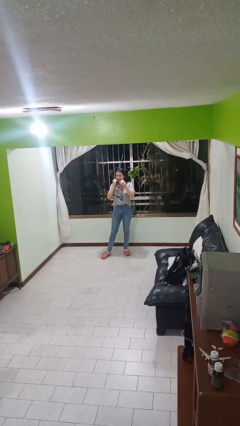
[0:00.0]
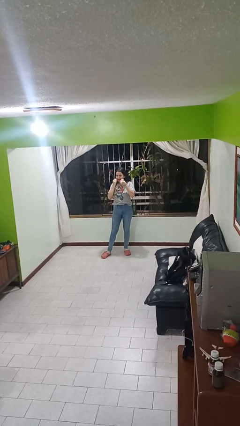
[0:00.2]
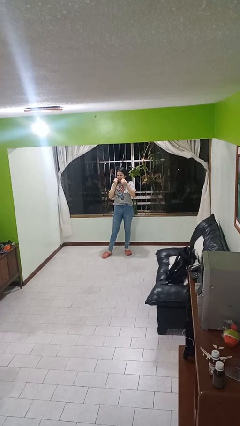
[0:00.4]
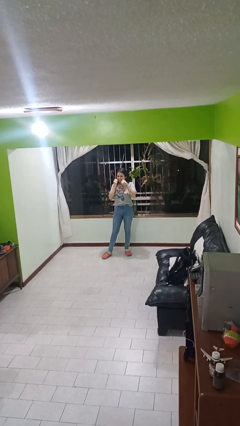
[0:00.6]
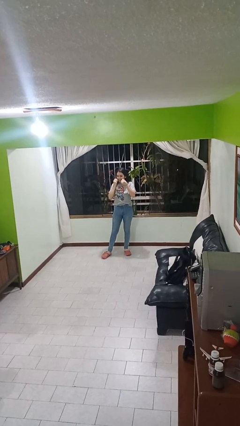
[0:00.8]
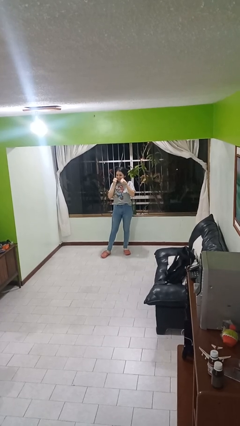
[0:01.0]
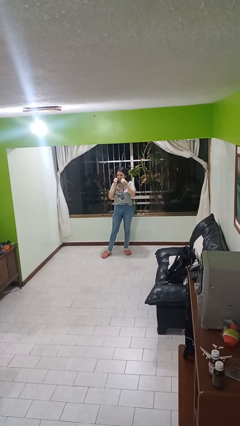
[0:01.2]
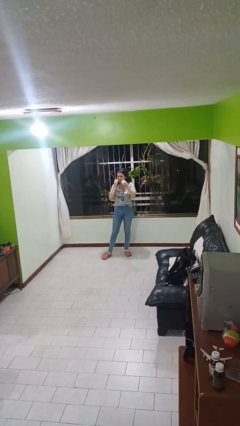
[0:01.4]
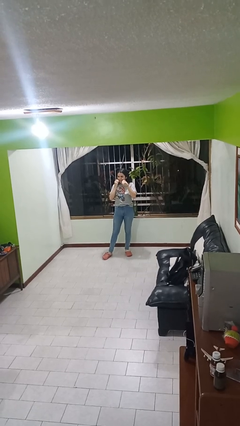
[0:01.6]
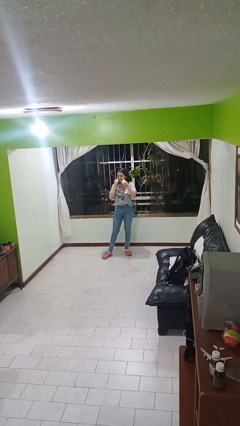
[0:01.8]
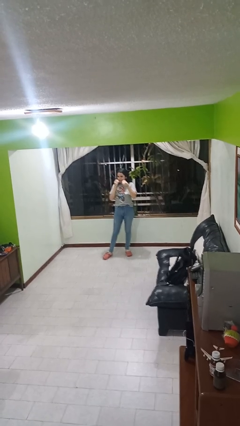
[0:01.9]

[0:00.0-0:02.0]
person flosses

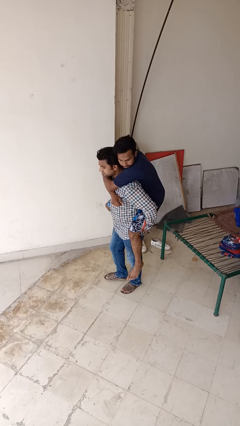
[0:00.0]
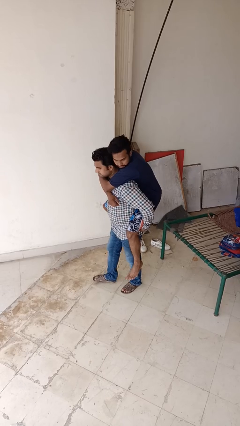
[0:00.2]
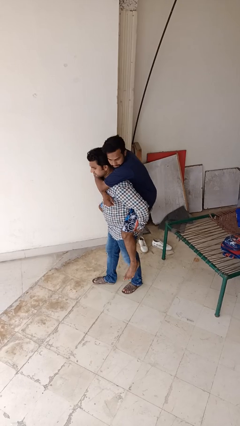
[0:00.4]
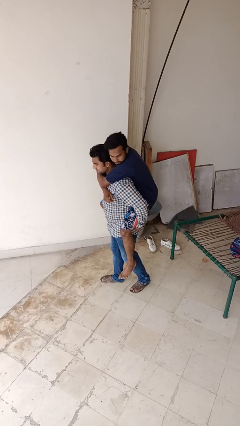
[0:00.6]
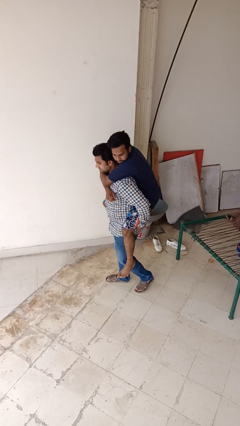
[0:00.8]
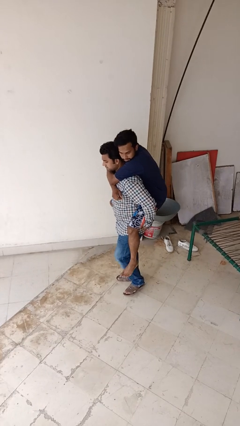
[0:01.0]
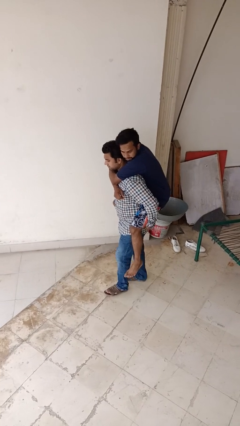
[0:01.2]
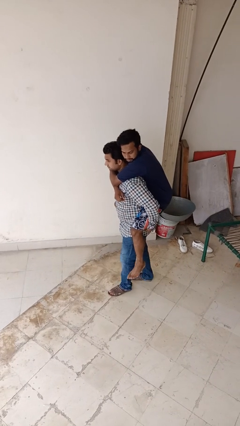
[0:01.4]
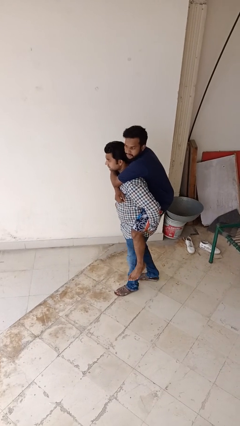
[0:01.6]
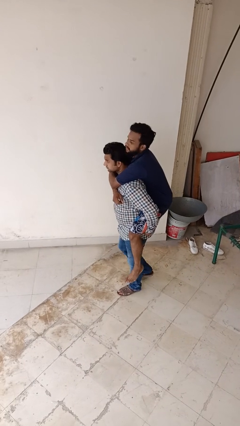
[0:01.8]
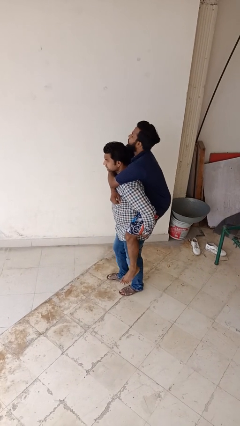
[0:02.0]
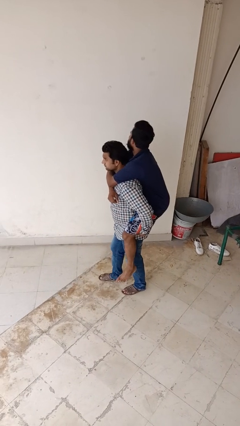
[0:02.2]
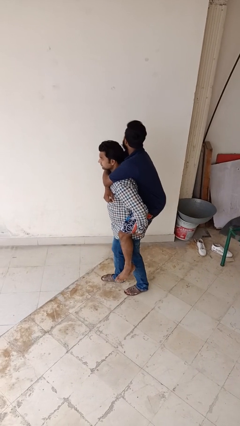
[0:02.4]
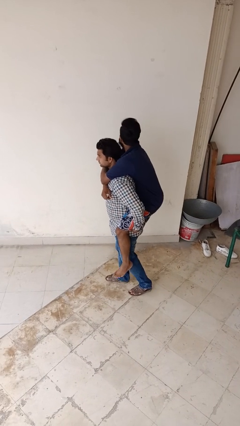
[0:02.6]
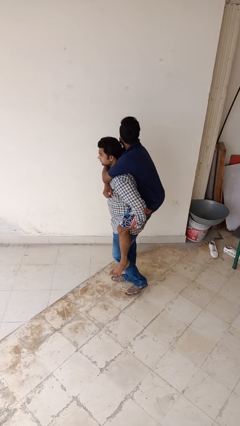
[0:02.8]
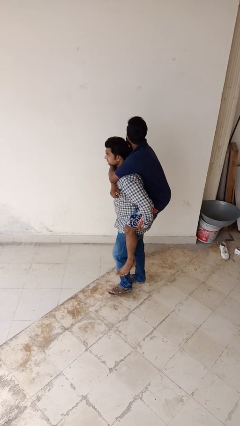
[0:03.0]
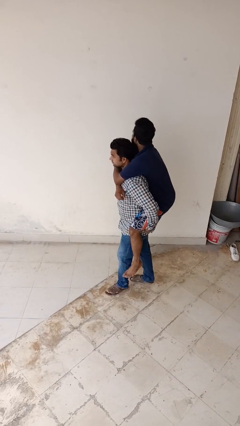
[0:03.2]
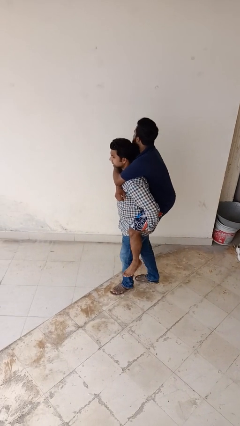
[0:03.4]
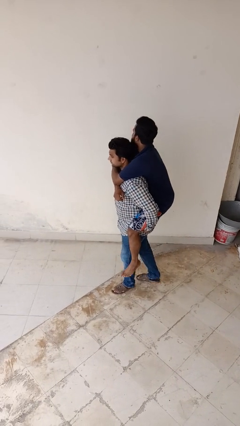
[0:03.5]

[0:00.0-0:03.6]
person carries person on back

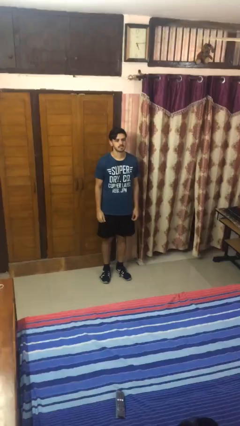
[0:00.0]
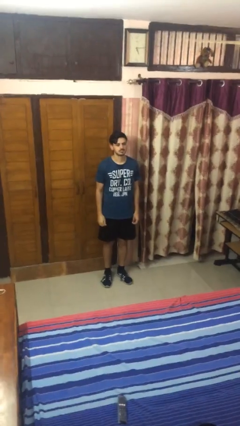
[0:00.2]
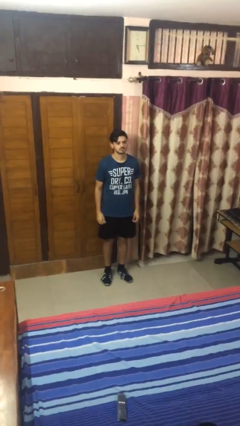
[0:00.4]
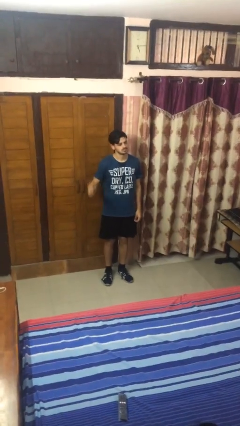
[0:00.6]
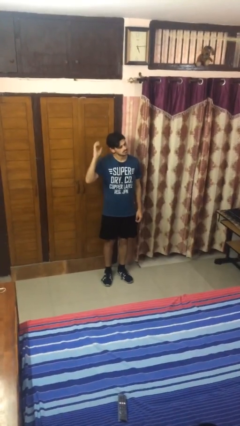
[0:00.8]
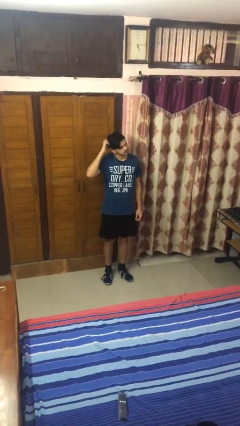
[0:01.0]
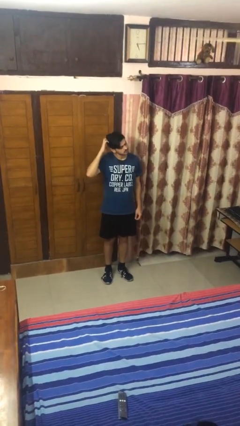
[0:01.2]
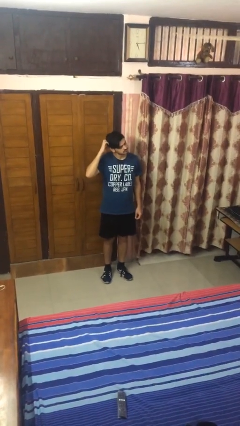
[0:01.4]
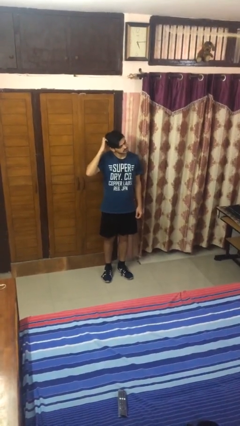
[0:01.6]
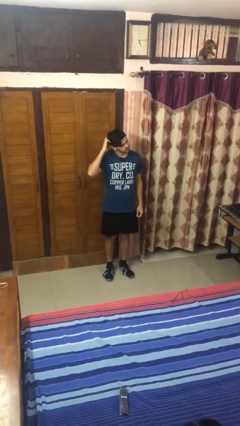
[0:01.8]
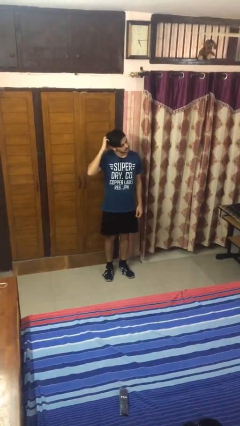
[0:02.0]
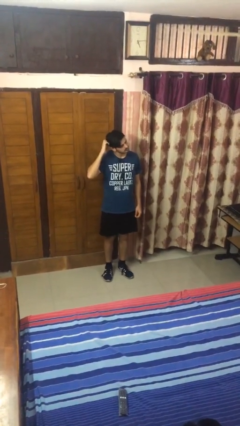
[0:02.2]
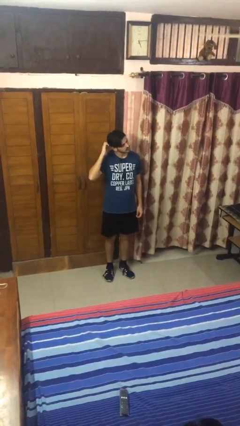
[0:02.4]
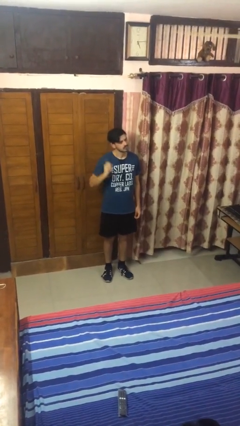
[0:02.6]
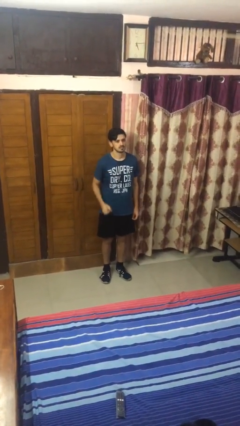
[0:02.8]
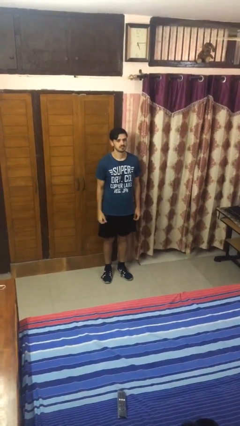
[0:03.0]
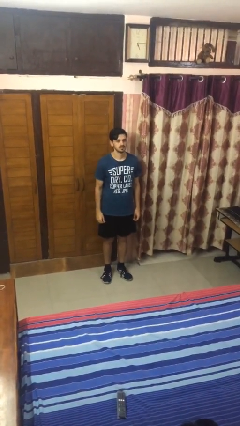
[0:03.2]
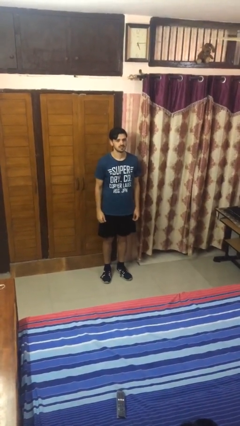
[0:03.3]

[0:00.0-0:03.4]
person scratches face

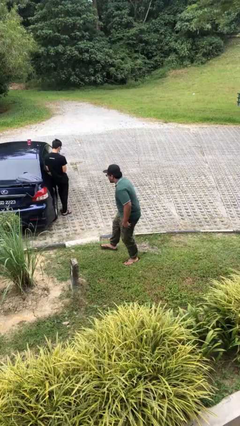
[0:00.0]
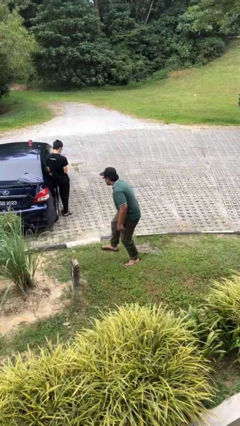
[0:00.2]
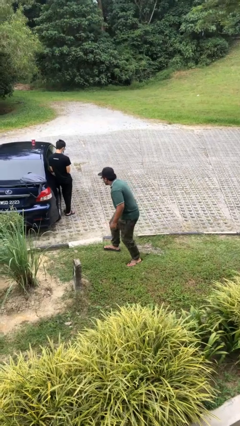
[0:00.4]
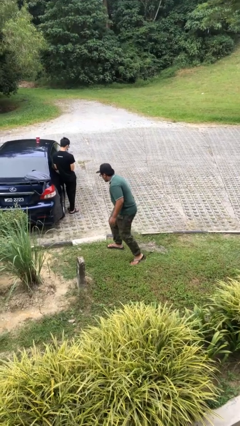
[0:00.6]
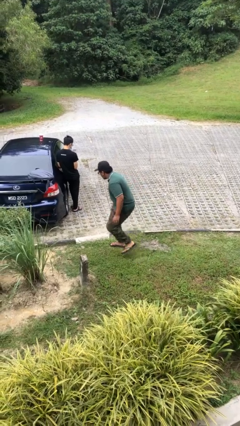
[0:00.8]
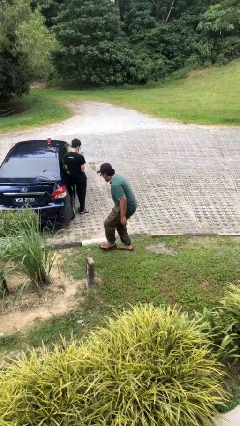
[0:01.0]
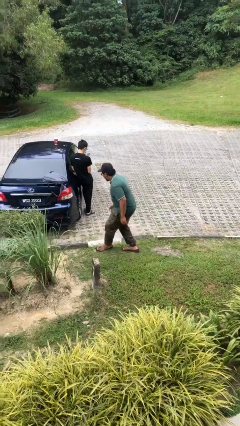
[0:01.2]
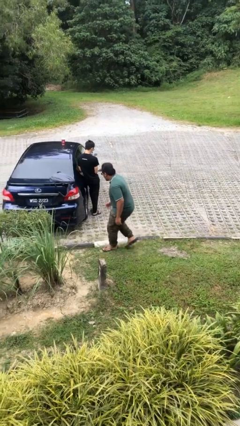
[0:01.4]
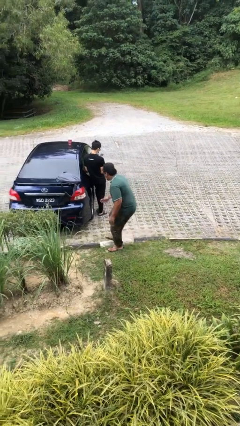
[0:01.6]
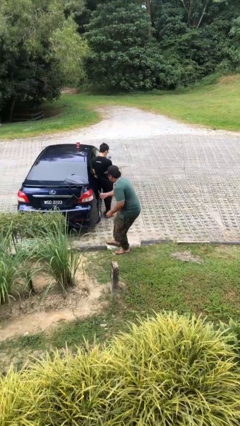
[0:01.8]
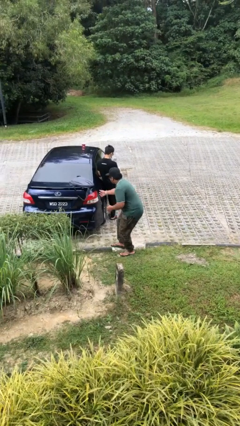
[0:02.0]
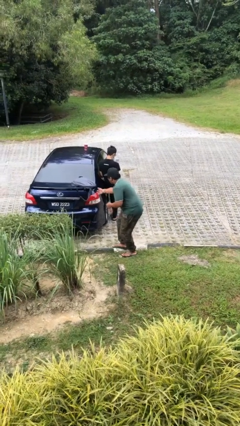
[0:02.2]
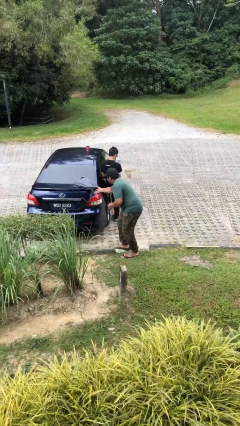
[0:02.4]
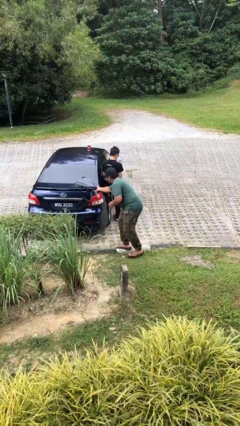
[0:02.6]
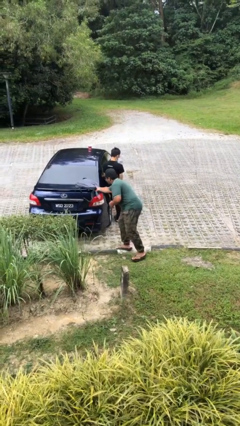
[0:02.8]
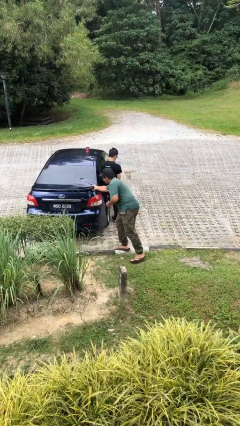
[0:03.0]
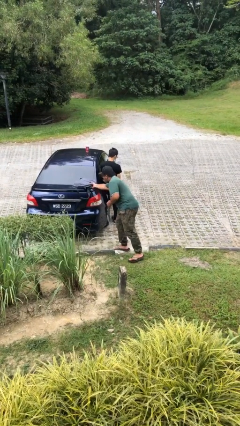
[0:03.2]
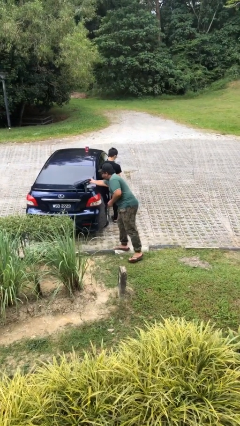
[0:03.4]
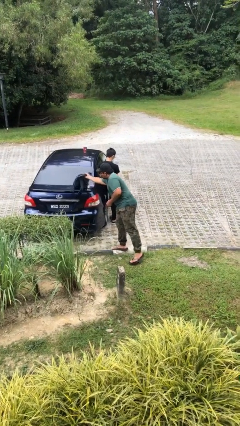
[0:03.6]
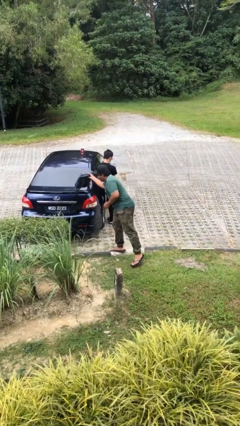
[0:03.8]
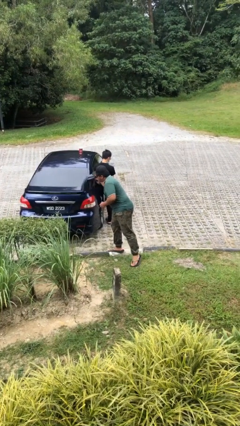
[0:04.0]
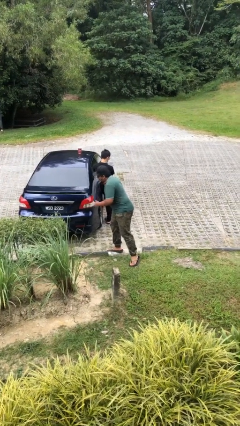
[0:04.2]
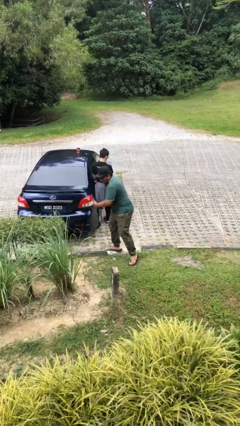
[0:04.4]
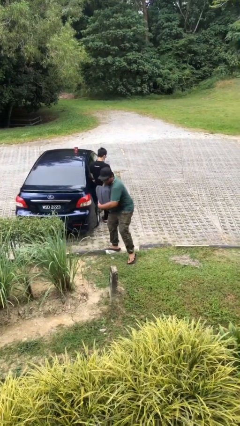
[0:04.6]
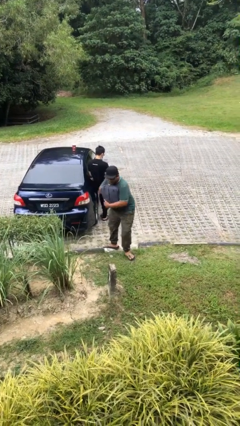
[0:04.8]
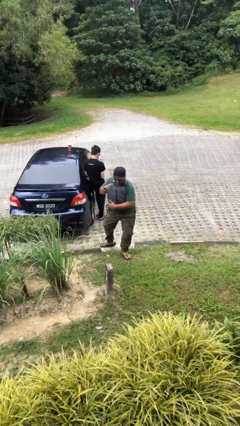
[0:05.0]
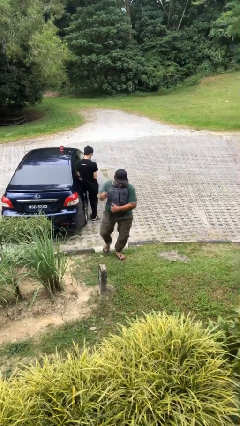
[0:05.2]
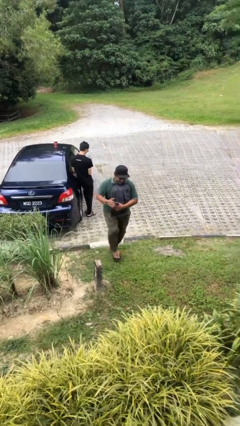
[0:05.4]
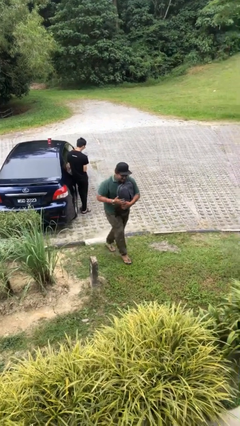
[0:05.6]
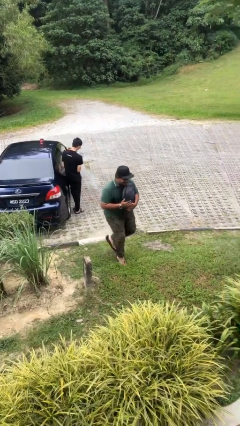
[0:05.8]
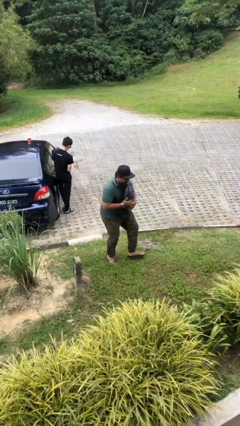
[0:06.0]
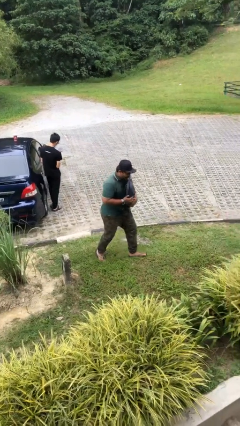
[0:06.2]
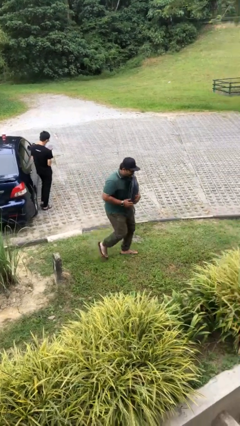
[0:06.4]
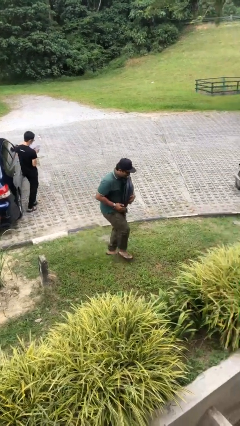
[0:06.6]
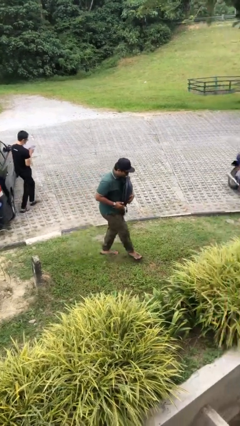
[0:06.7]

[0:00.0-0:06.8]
person steals object from person

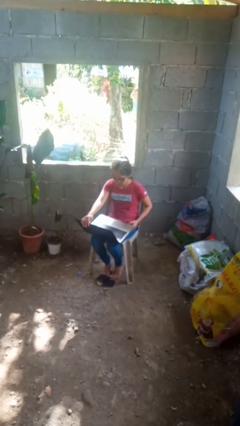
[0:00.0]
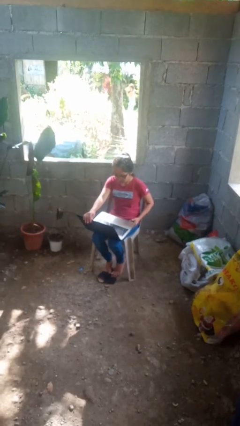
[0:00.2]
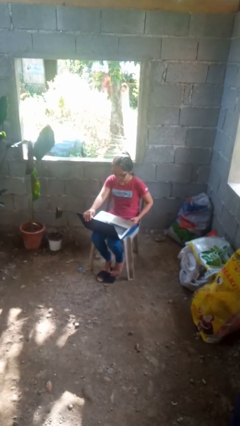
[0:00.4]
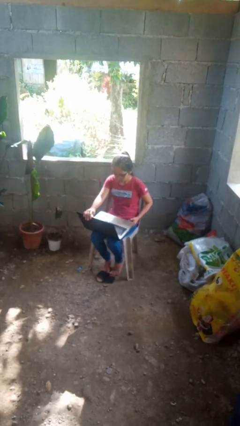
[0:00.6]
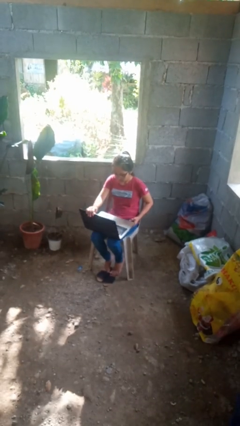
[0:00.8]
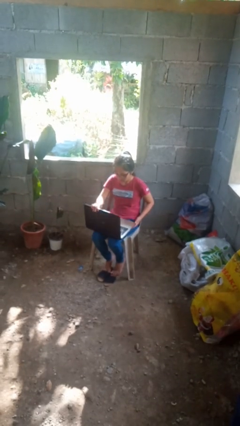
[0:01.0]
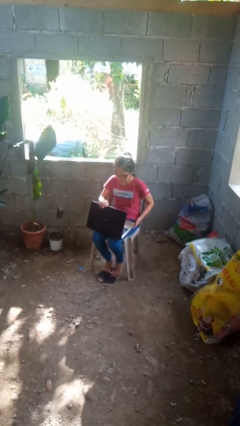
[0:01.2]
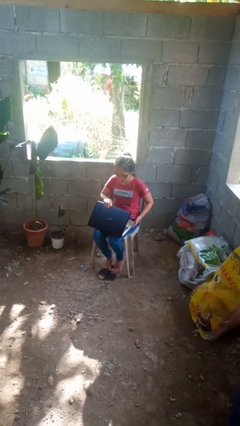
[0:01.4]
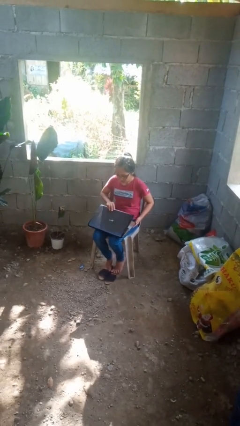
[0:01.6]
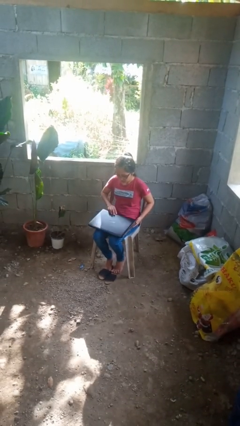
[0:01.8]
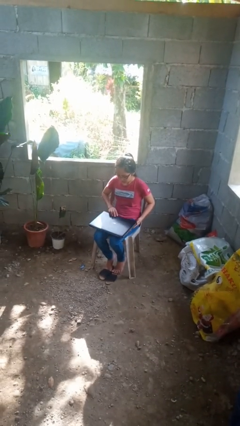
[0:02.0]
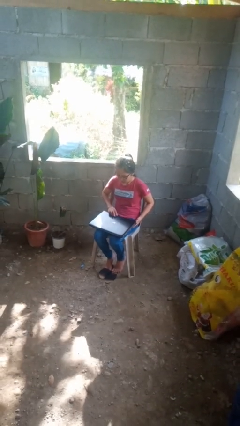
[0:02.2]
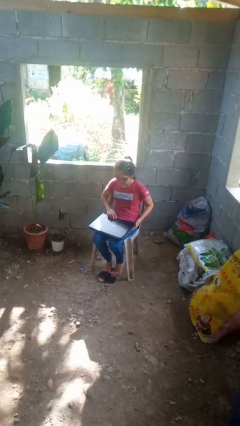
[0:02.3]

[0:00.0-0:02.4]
person closes laptop
